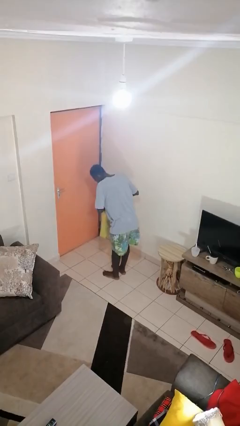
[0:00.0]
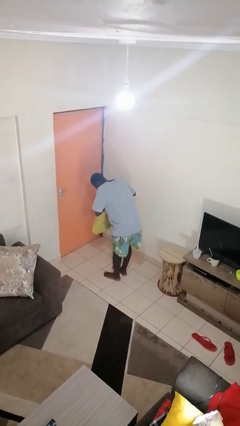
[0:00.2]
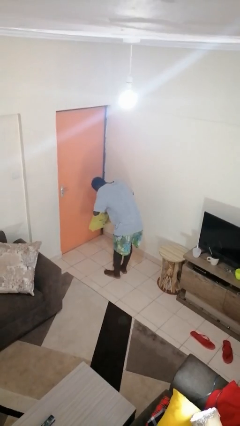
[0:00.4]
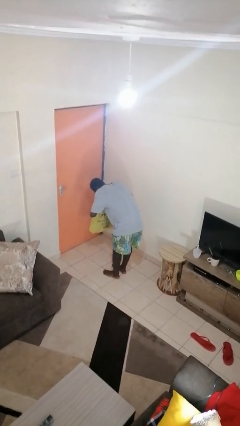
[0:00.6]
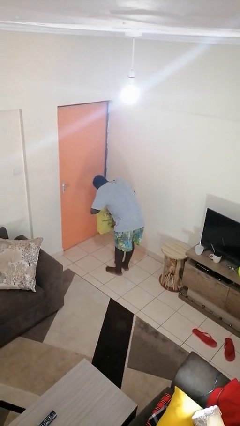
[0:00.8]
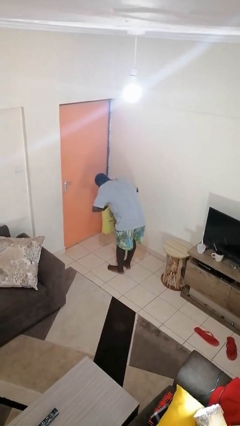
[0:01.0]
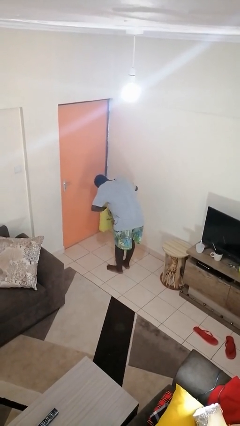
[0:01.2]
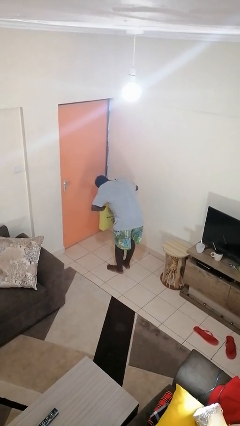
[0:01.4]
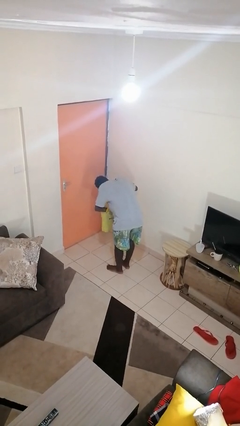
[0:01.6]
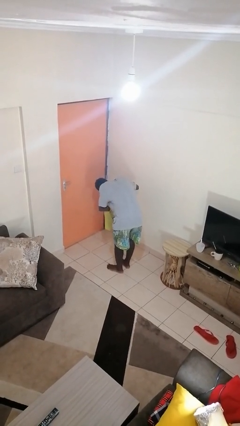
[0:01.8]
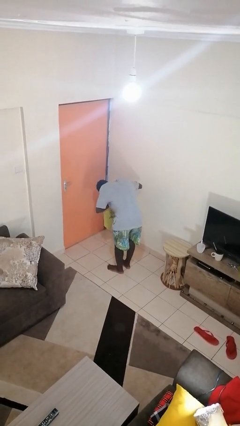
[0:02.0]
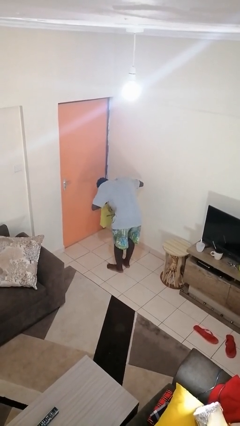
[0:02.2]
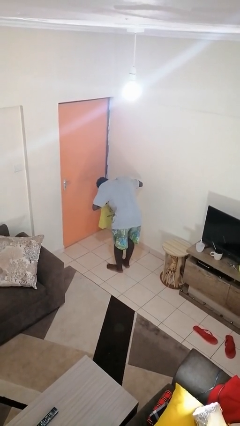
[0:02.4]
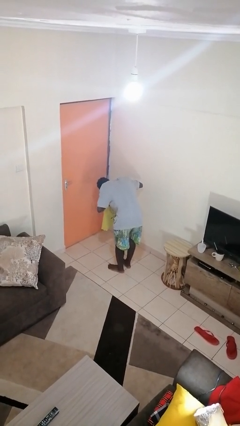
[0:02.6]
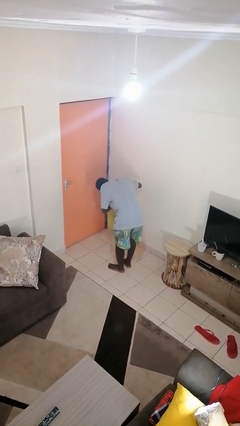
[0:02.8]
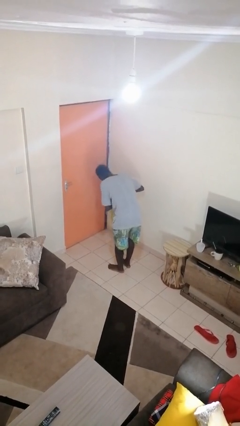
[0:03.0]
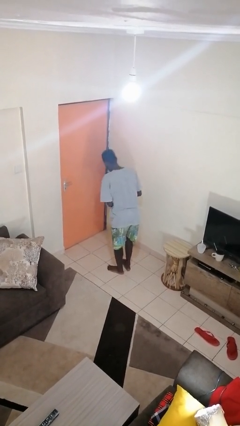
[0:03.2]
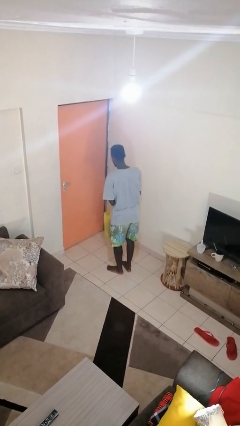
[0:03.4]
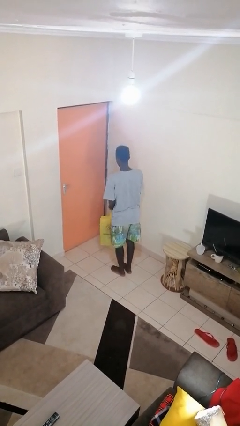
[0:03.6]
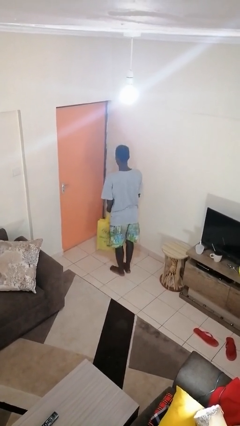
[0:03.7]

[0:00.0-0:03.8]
person searches in bag

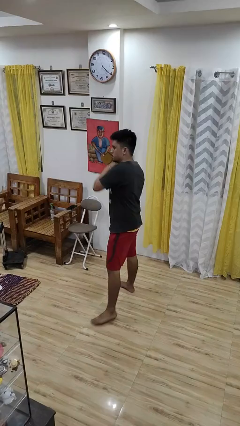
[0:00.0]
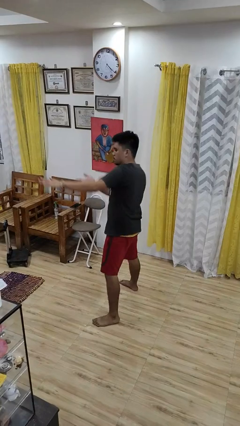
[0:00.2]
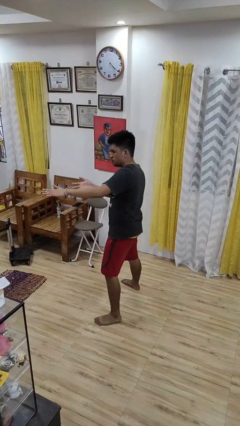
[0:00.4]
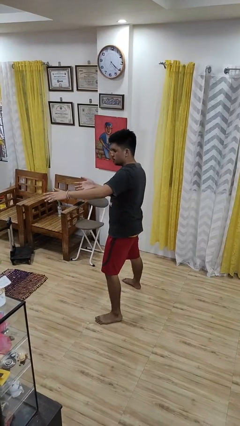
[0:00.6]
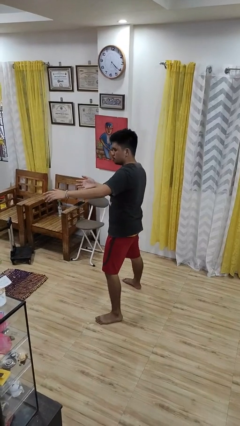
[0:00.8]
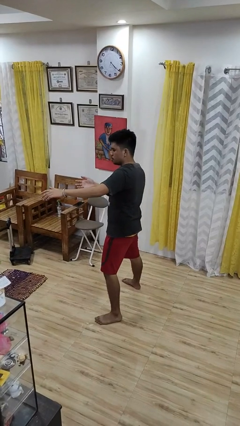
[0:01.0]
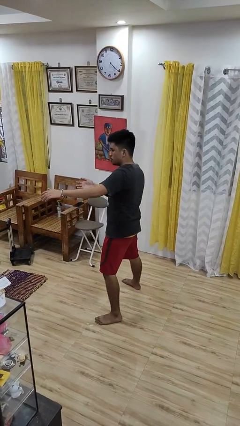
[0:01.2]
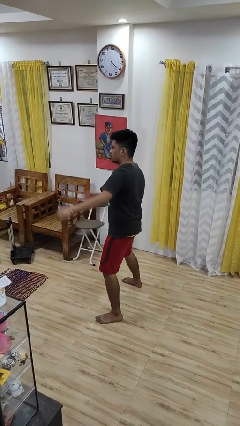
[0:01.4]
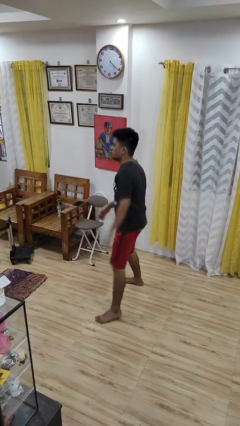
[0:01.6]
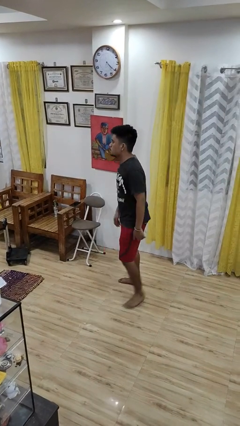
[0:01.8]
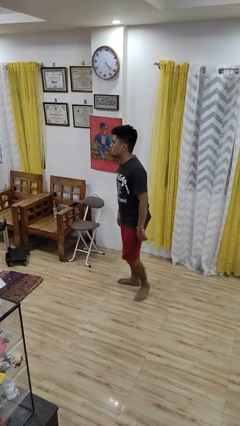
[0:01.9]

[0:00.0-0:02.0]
person karate chop

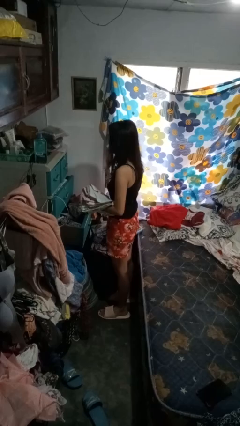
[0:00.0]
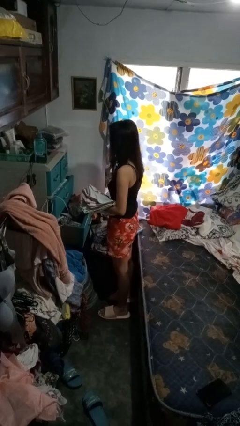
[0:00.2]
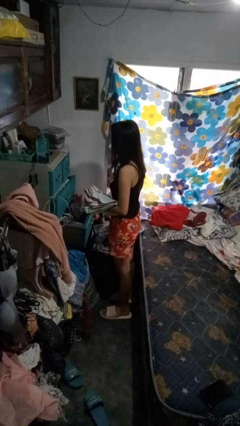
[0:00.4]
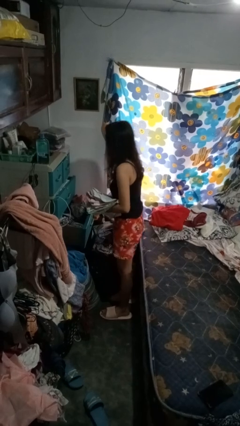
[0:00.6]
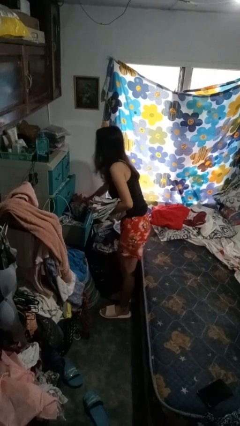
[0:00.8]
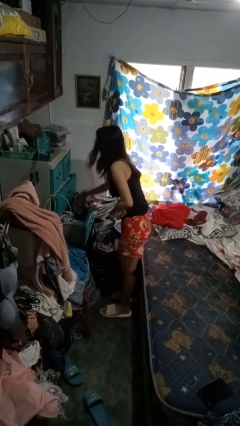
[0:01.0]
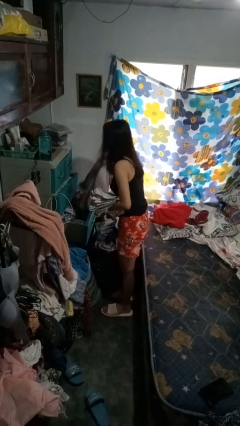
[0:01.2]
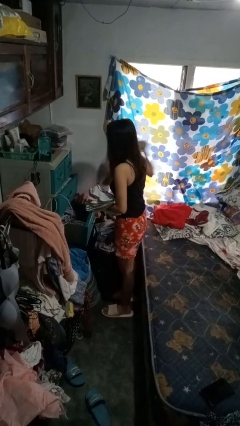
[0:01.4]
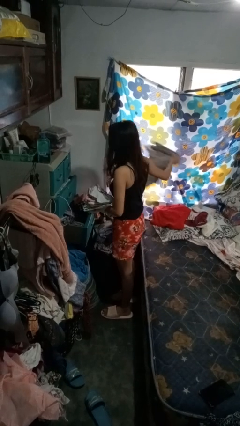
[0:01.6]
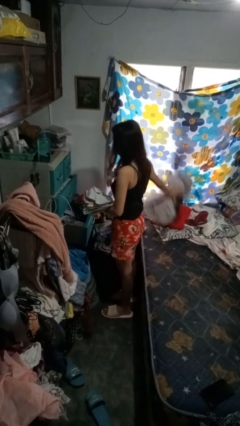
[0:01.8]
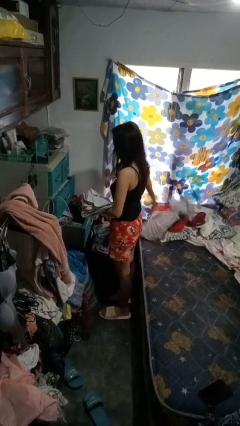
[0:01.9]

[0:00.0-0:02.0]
person takes clothes from dresser

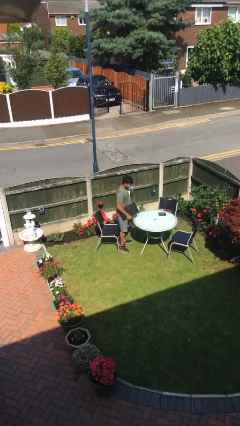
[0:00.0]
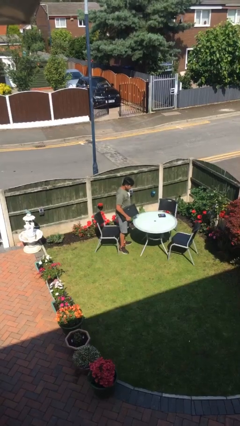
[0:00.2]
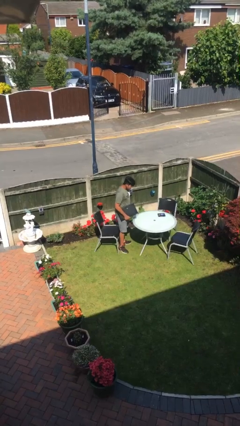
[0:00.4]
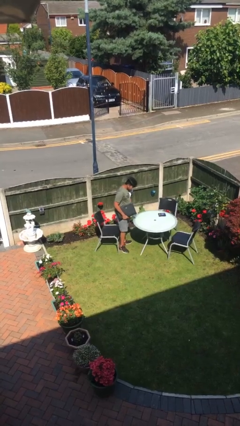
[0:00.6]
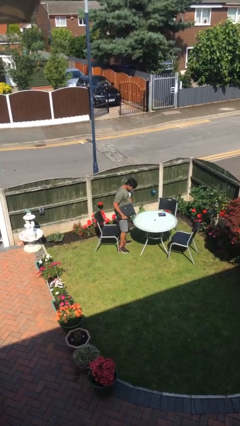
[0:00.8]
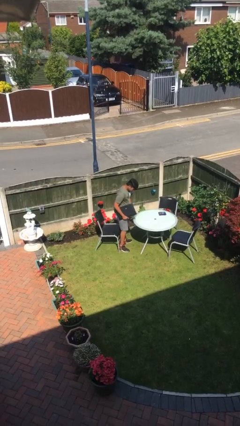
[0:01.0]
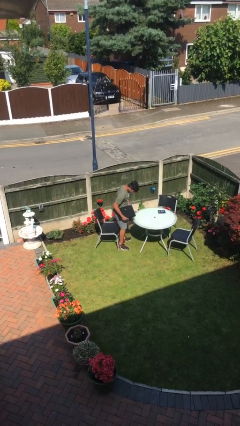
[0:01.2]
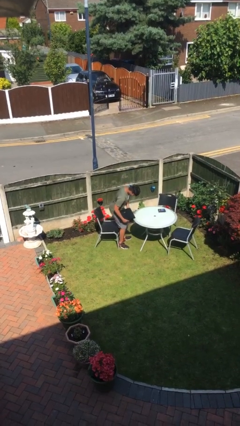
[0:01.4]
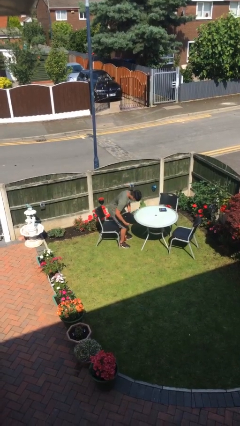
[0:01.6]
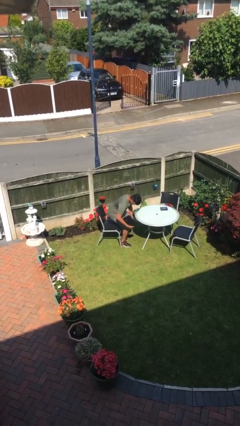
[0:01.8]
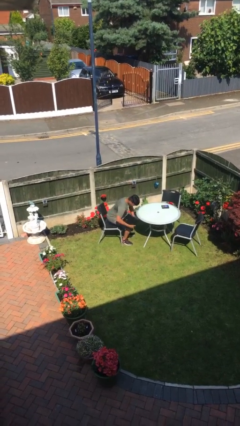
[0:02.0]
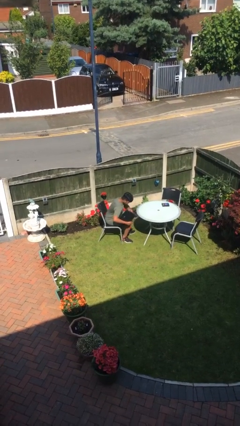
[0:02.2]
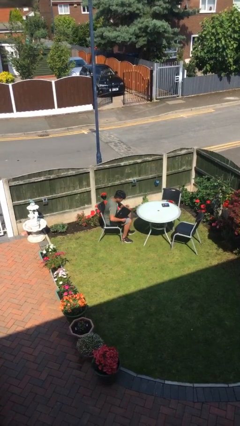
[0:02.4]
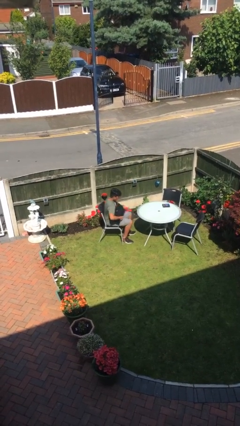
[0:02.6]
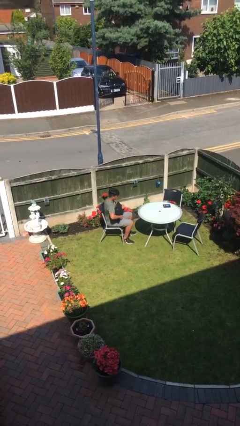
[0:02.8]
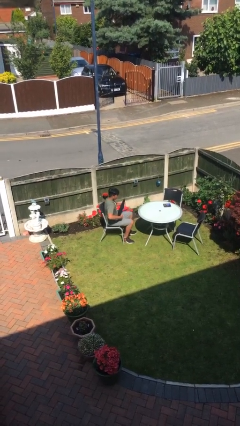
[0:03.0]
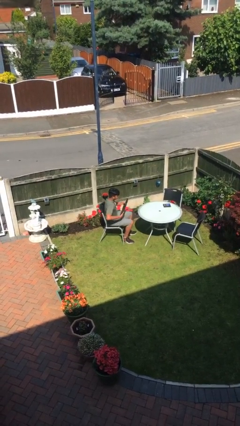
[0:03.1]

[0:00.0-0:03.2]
person sits down

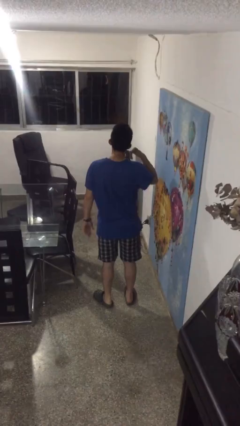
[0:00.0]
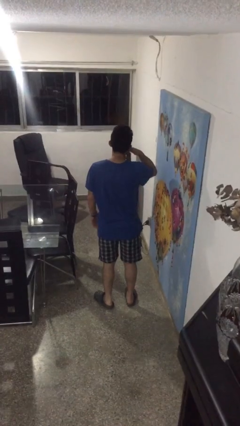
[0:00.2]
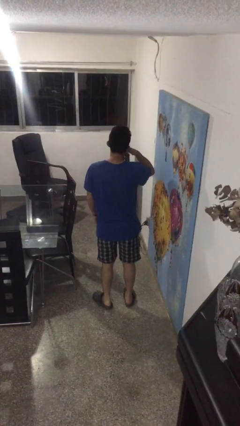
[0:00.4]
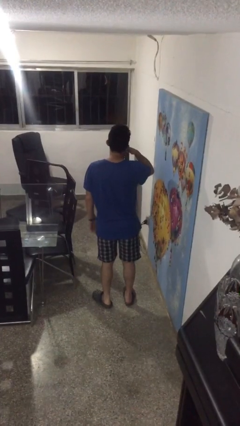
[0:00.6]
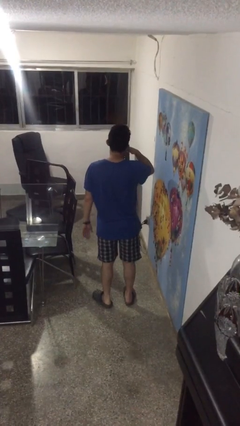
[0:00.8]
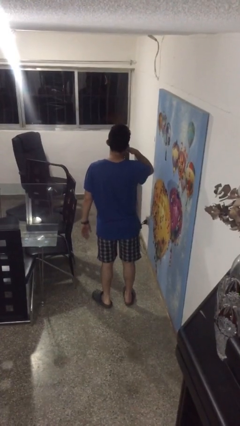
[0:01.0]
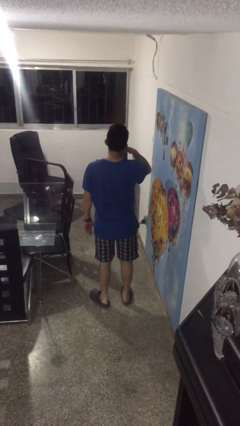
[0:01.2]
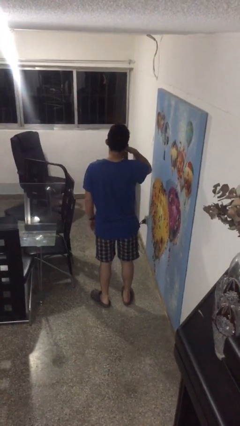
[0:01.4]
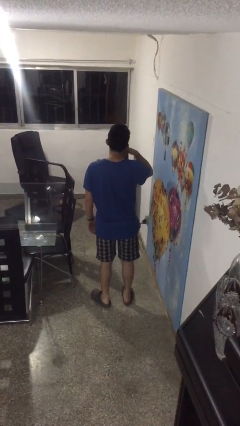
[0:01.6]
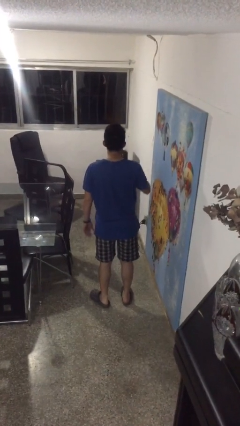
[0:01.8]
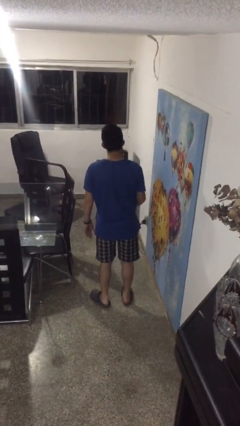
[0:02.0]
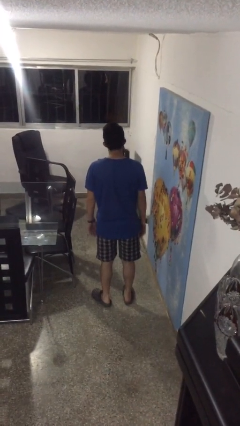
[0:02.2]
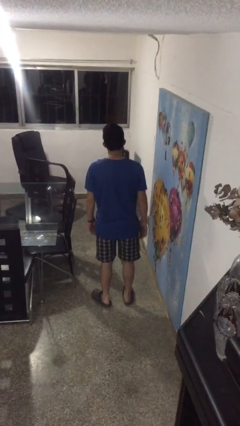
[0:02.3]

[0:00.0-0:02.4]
person gestures call me

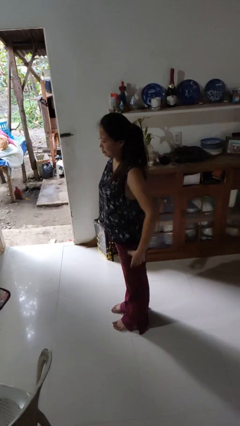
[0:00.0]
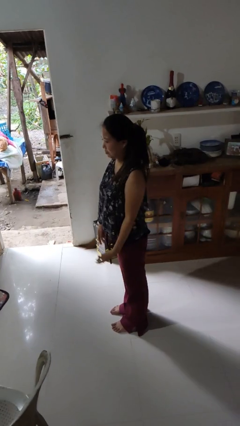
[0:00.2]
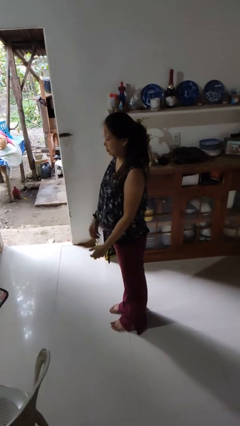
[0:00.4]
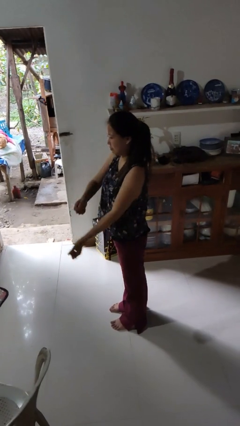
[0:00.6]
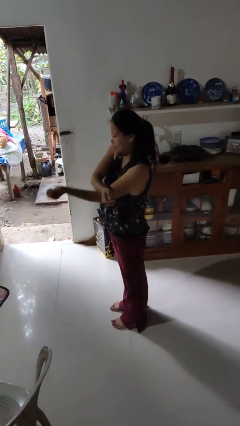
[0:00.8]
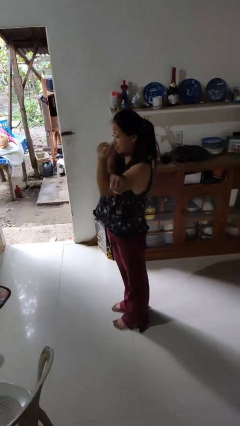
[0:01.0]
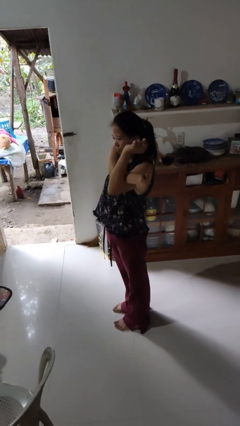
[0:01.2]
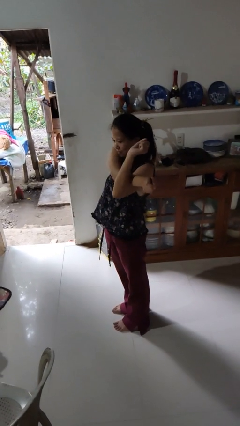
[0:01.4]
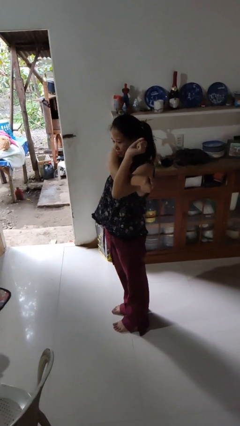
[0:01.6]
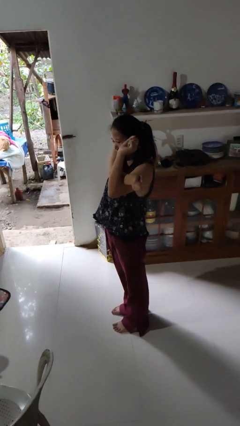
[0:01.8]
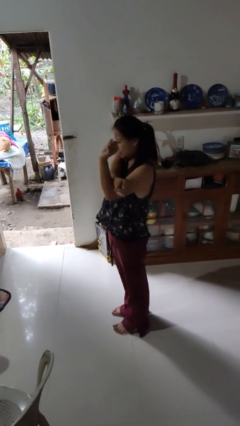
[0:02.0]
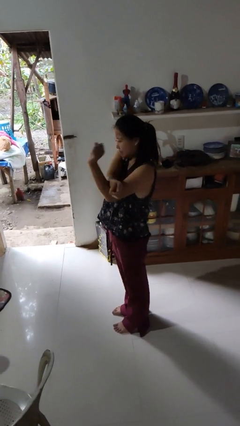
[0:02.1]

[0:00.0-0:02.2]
person stretches arms to side

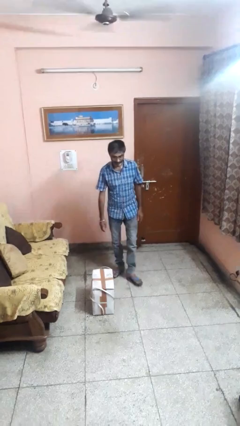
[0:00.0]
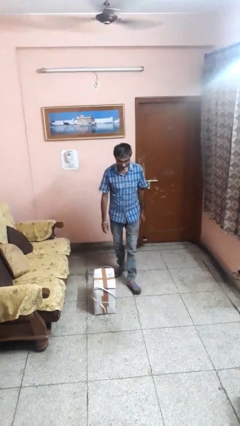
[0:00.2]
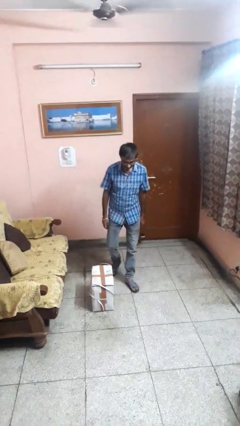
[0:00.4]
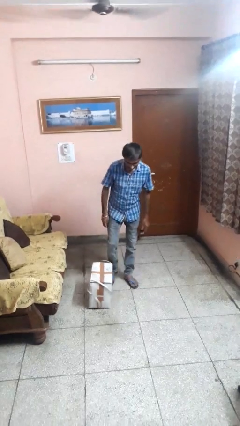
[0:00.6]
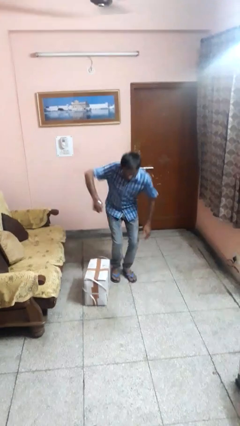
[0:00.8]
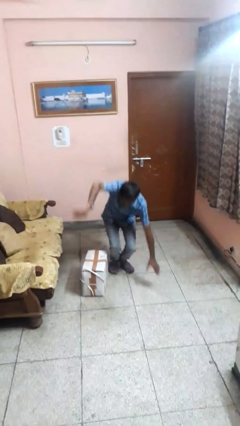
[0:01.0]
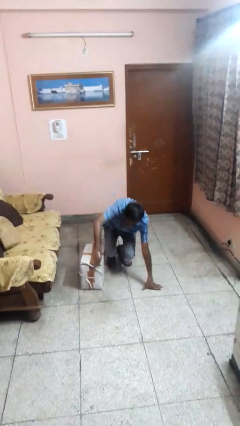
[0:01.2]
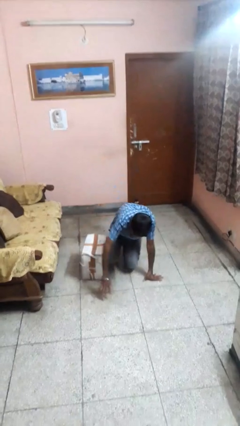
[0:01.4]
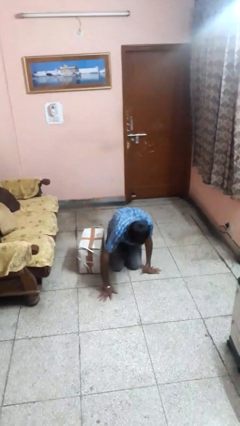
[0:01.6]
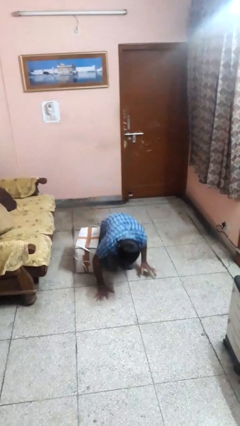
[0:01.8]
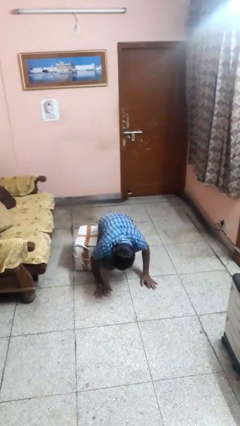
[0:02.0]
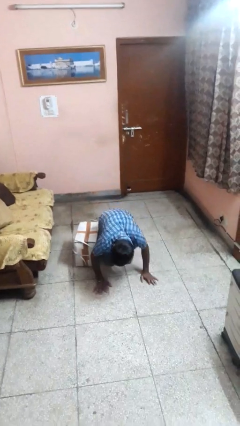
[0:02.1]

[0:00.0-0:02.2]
person trips on object on floor
